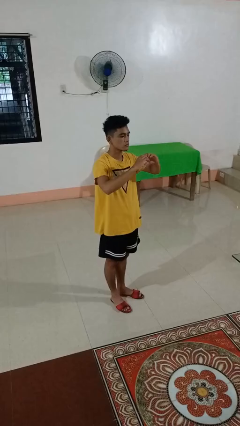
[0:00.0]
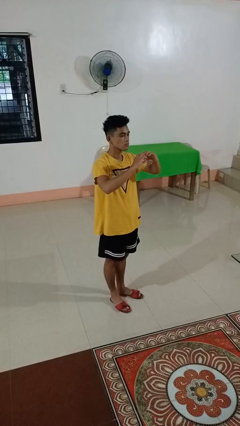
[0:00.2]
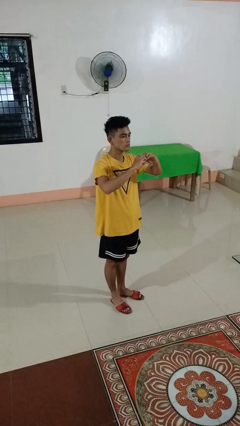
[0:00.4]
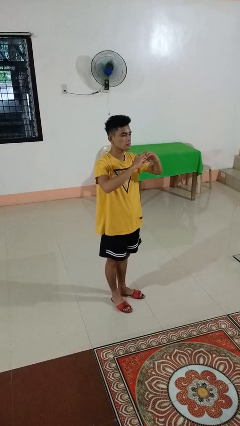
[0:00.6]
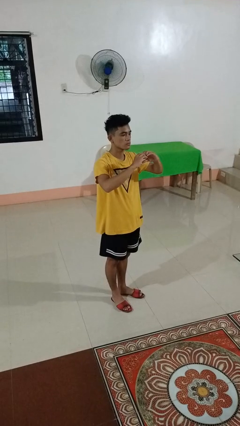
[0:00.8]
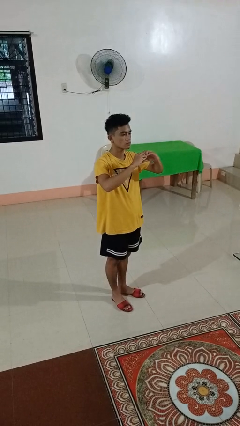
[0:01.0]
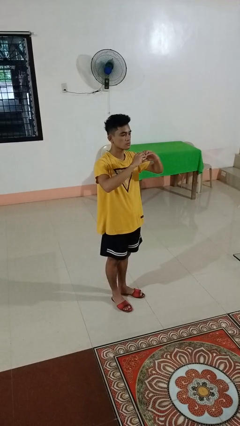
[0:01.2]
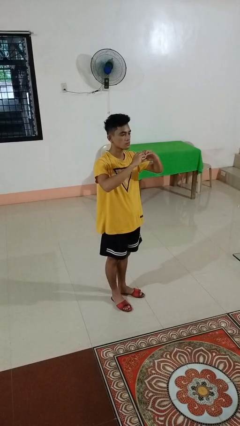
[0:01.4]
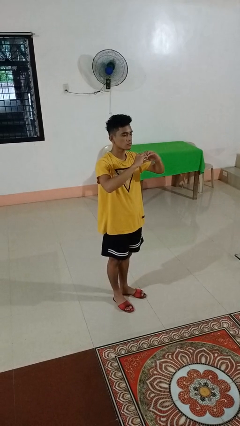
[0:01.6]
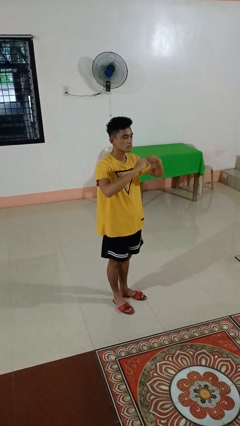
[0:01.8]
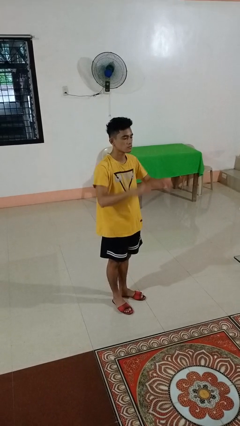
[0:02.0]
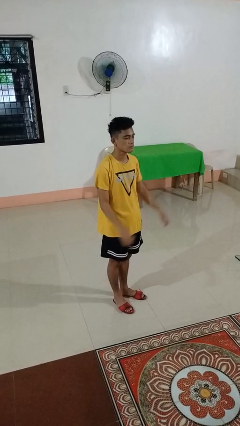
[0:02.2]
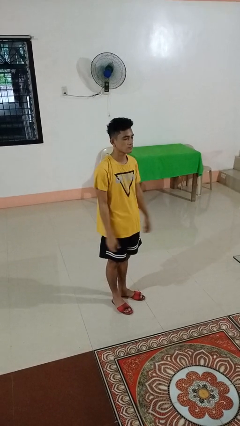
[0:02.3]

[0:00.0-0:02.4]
person gestures heart

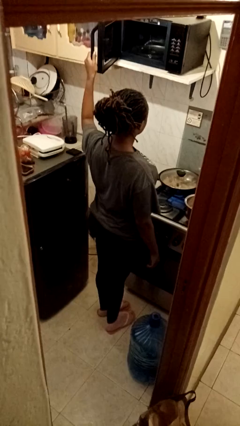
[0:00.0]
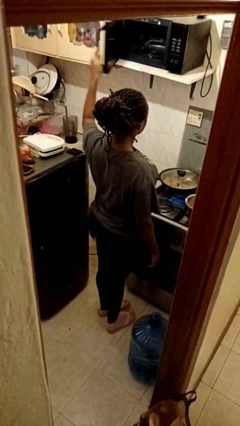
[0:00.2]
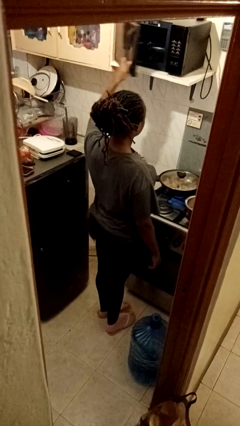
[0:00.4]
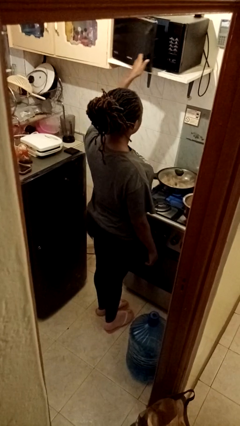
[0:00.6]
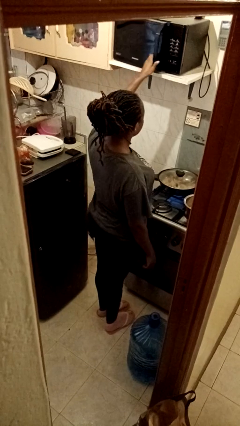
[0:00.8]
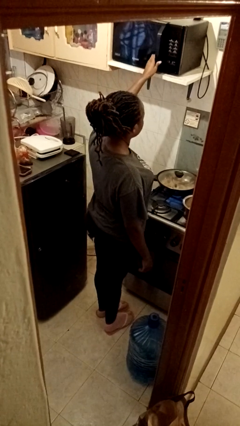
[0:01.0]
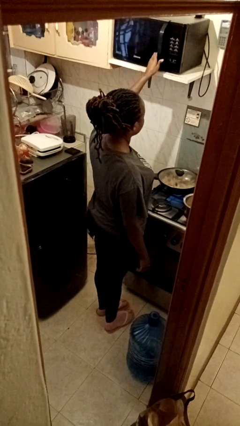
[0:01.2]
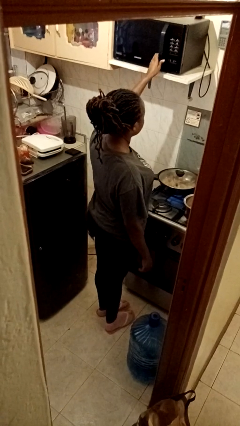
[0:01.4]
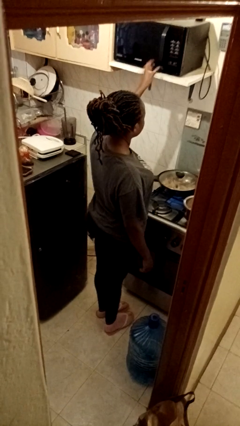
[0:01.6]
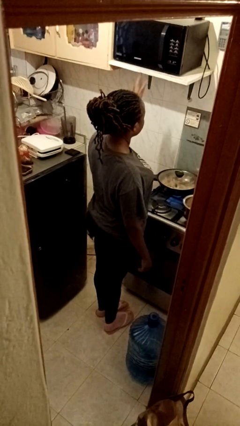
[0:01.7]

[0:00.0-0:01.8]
person closes microwave

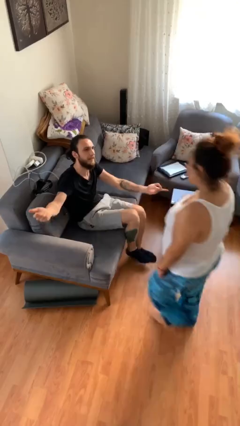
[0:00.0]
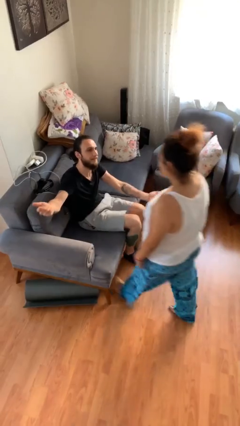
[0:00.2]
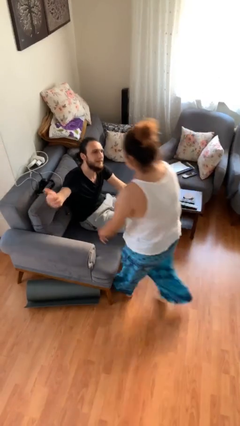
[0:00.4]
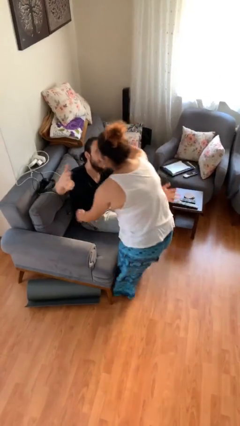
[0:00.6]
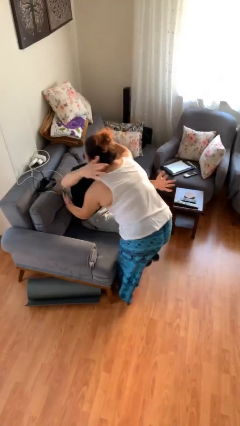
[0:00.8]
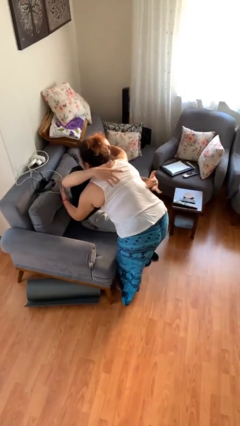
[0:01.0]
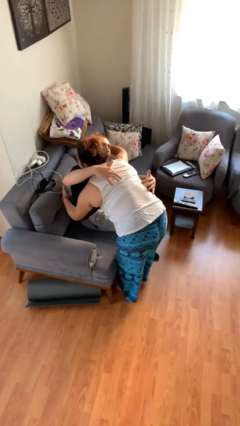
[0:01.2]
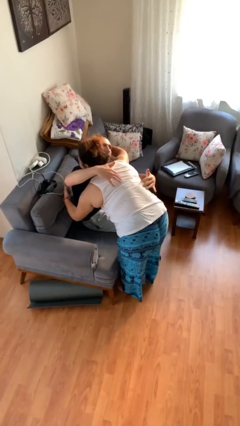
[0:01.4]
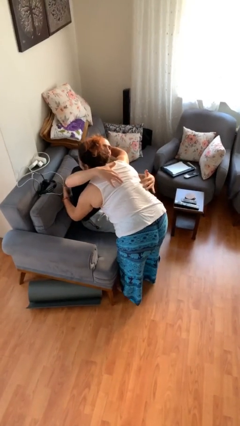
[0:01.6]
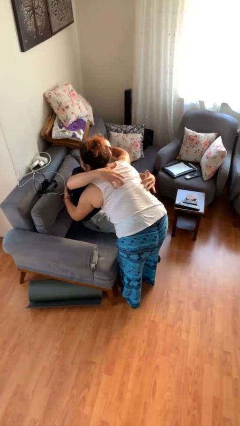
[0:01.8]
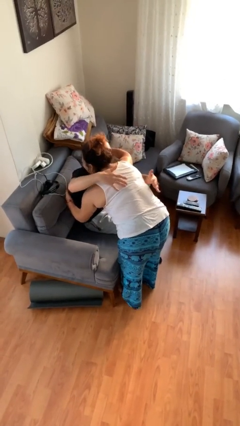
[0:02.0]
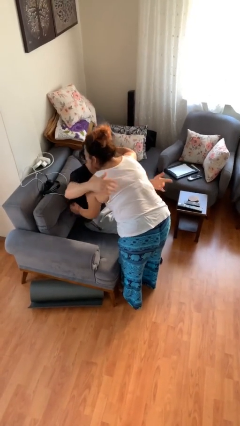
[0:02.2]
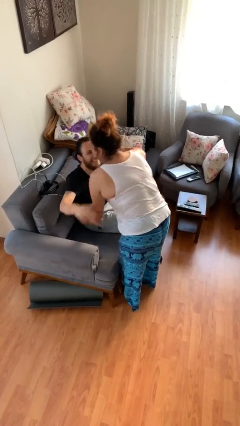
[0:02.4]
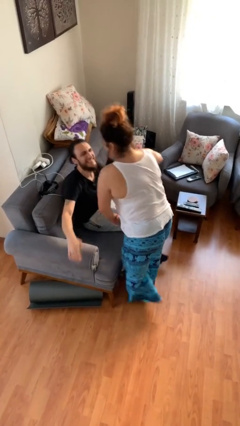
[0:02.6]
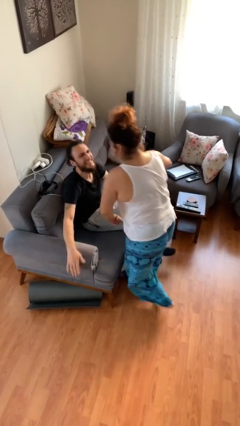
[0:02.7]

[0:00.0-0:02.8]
person embraces person

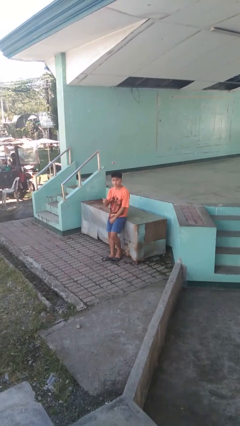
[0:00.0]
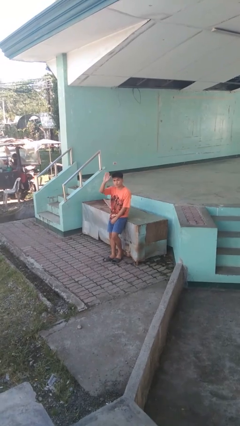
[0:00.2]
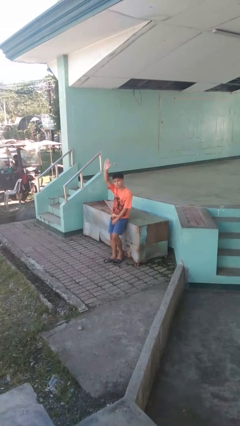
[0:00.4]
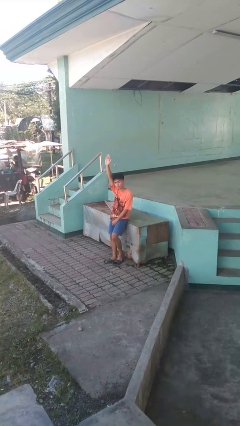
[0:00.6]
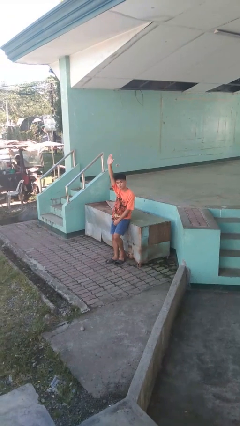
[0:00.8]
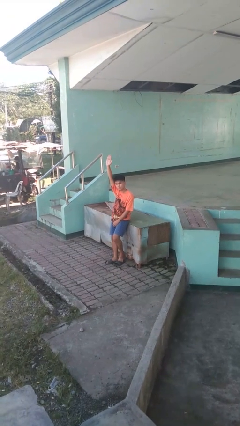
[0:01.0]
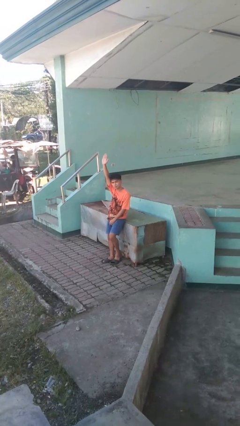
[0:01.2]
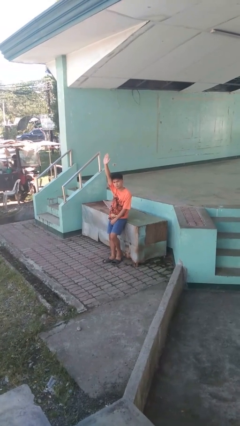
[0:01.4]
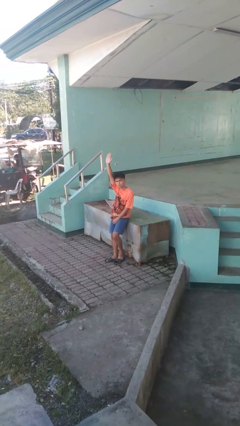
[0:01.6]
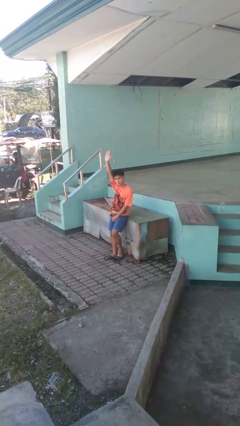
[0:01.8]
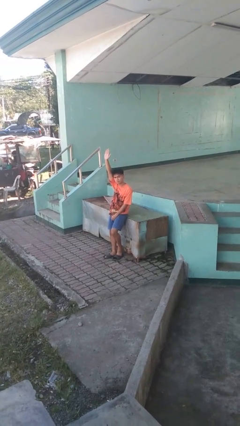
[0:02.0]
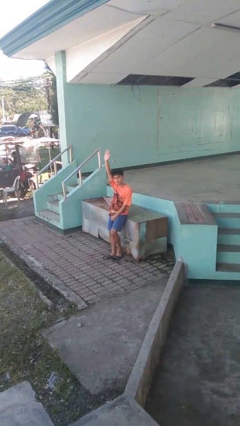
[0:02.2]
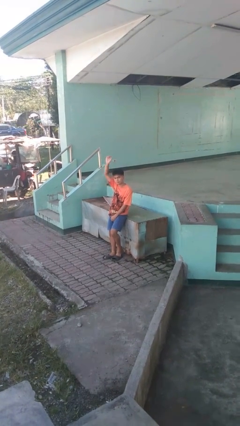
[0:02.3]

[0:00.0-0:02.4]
person gestures raise hand

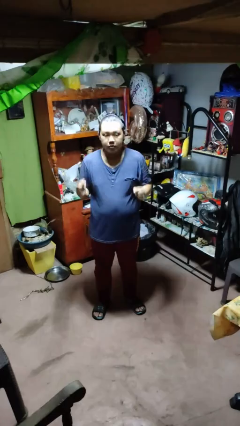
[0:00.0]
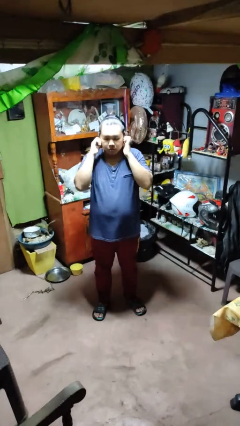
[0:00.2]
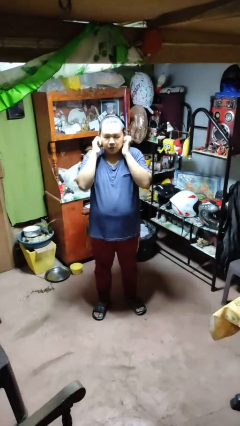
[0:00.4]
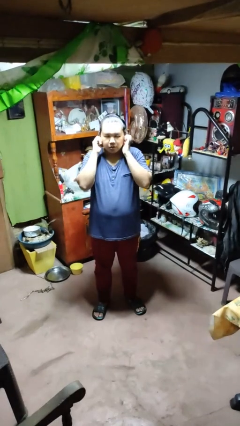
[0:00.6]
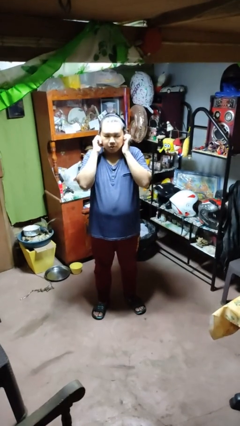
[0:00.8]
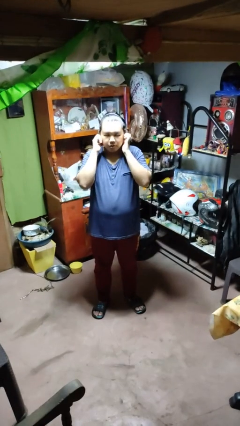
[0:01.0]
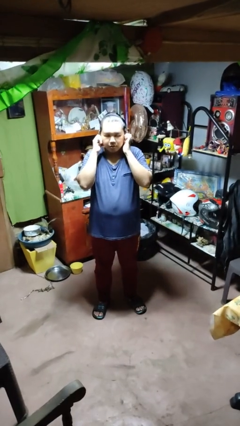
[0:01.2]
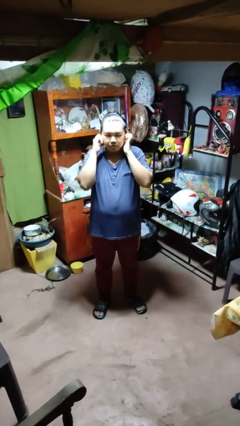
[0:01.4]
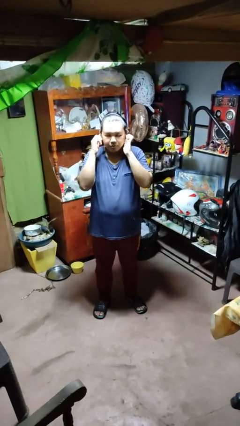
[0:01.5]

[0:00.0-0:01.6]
person puts fingers in ear

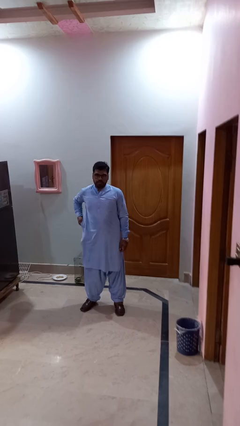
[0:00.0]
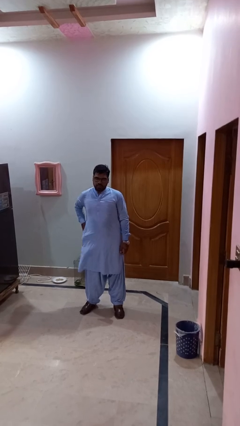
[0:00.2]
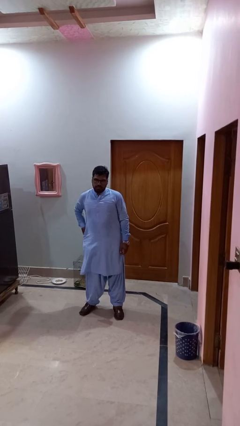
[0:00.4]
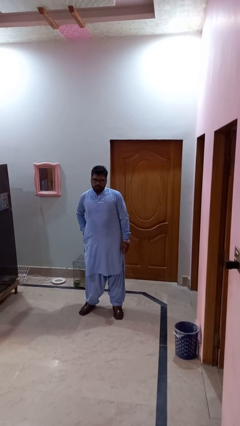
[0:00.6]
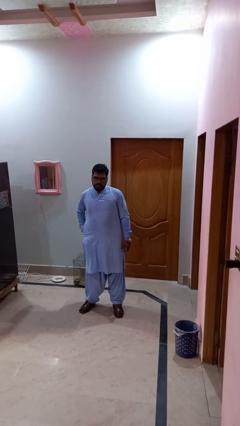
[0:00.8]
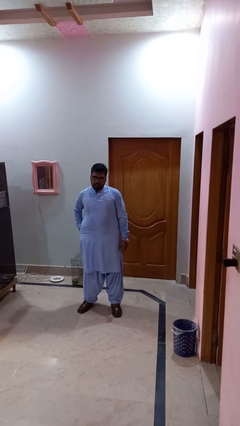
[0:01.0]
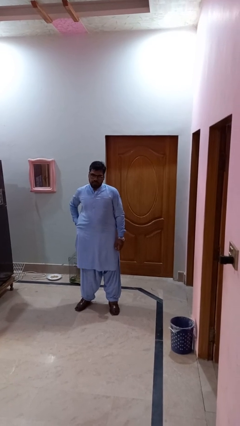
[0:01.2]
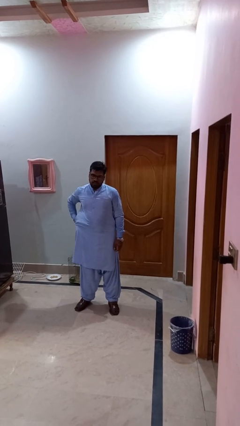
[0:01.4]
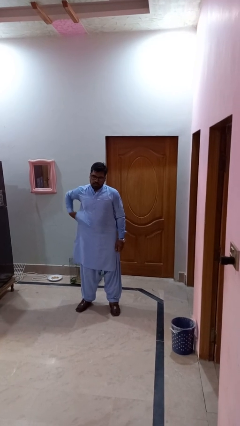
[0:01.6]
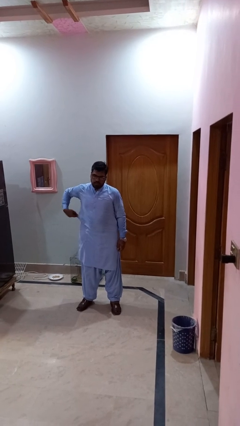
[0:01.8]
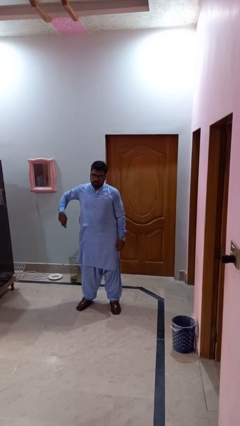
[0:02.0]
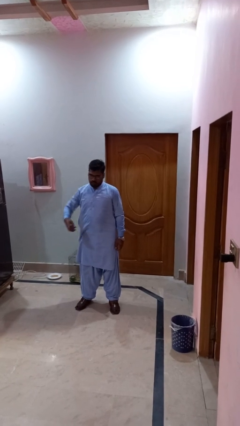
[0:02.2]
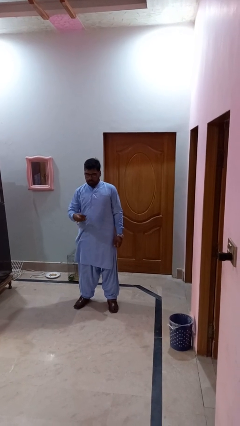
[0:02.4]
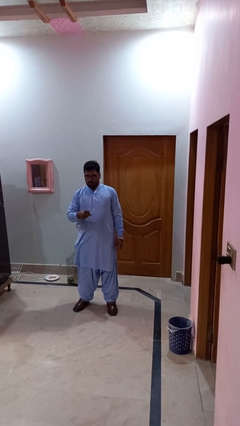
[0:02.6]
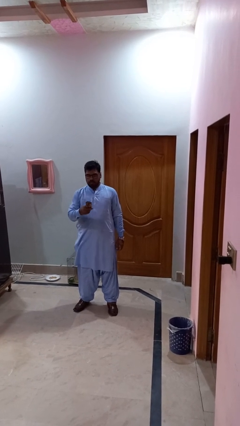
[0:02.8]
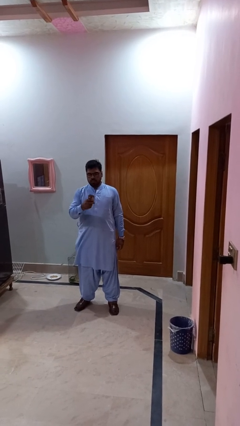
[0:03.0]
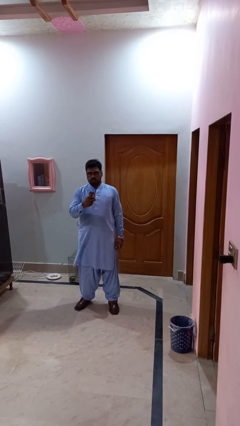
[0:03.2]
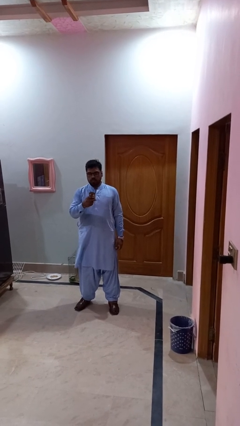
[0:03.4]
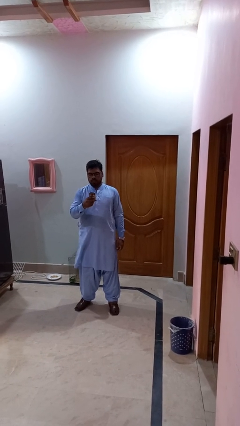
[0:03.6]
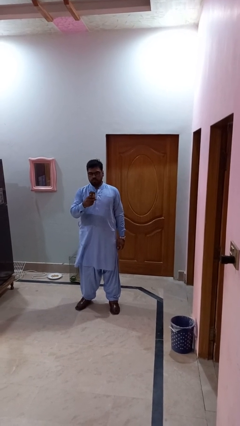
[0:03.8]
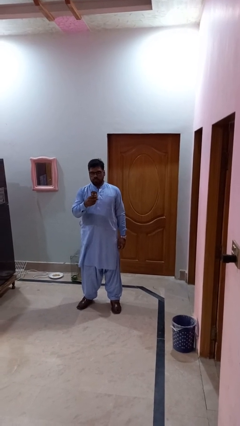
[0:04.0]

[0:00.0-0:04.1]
person takes phone from pocket

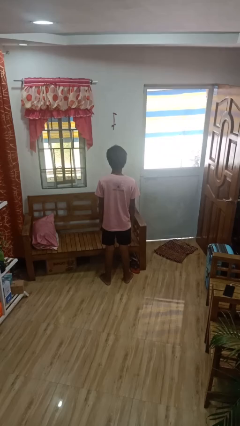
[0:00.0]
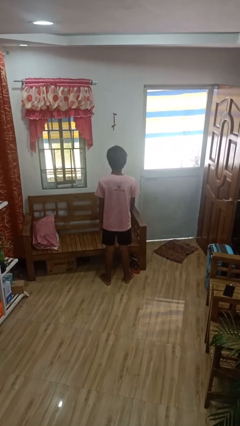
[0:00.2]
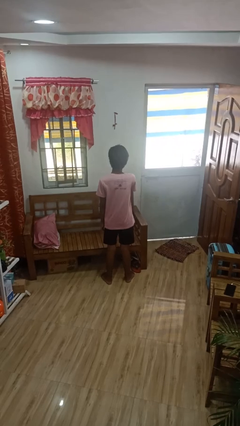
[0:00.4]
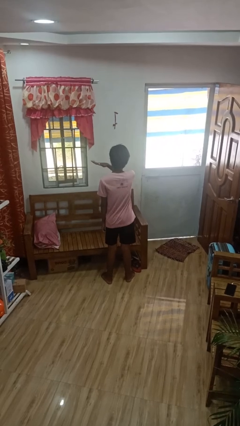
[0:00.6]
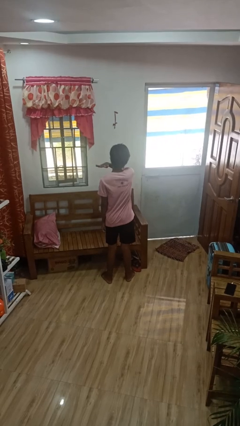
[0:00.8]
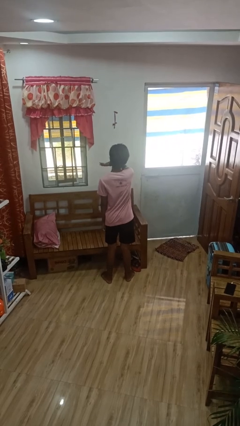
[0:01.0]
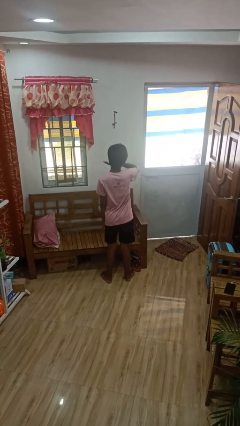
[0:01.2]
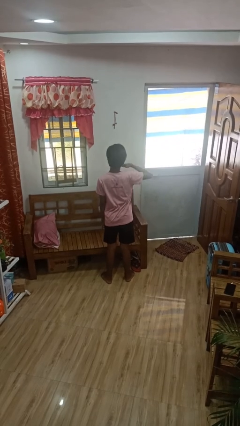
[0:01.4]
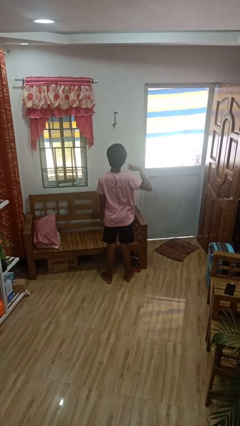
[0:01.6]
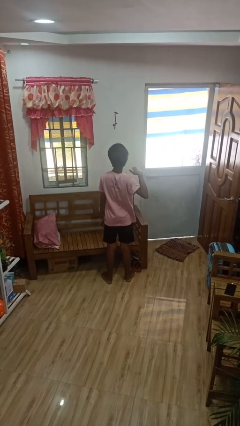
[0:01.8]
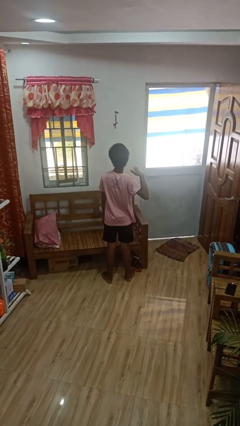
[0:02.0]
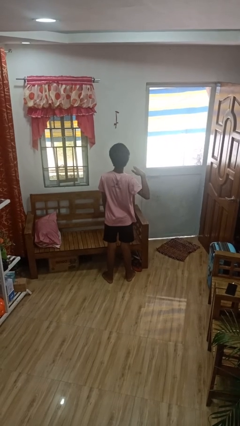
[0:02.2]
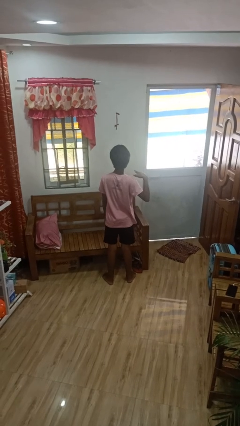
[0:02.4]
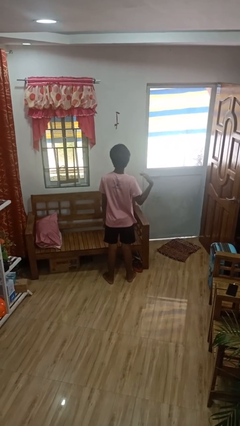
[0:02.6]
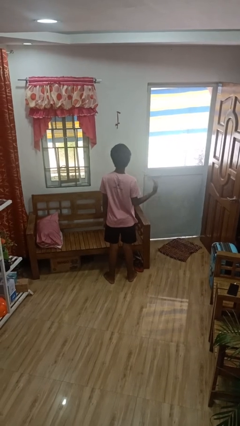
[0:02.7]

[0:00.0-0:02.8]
person gestures cut
